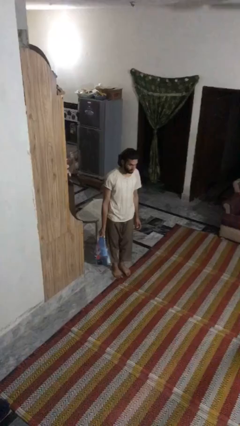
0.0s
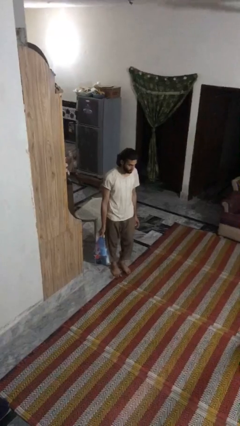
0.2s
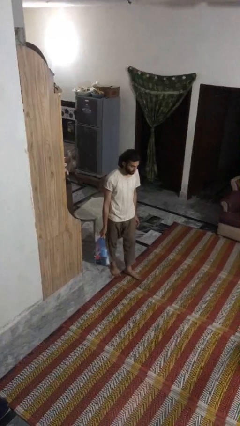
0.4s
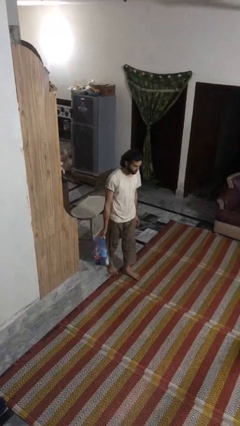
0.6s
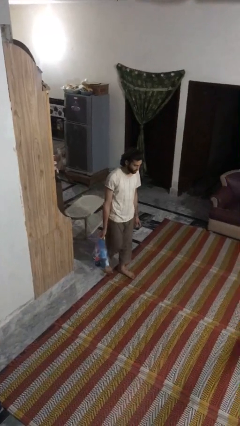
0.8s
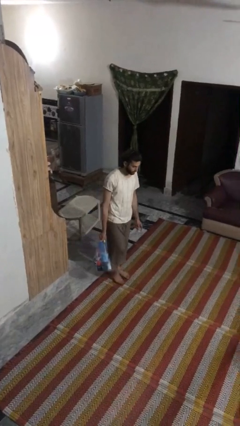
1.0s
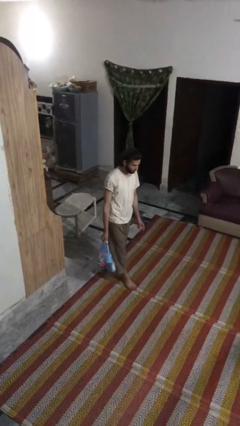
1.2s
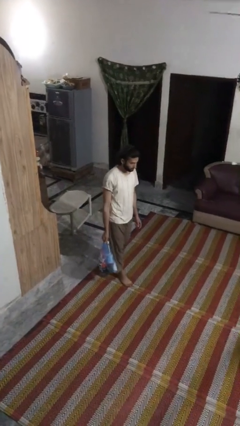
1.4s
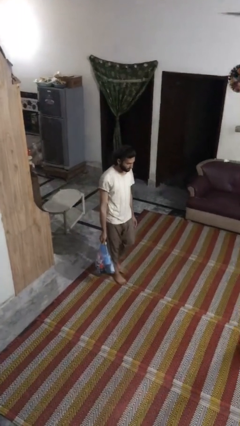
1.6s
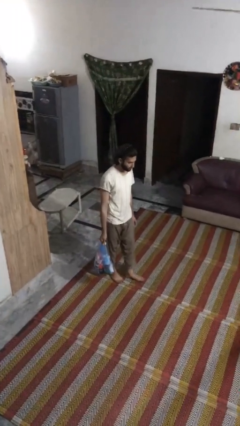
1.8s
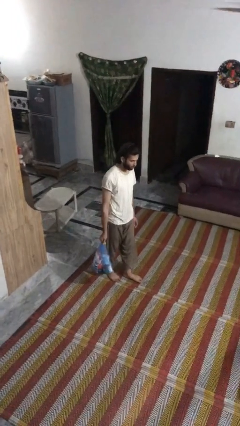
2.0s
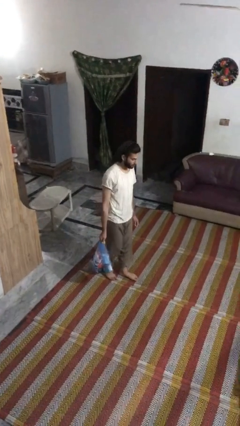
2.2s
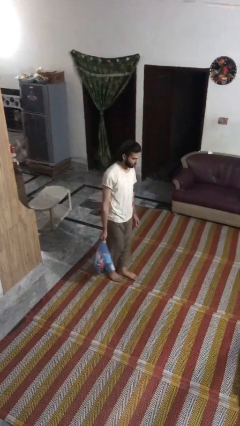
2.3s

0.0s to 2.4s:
person carries groceries

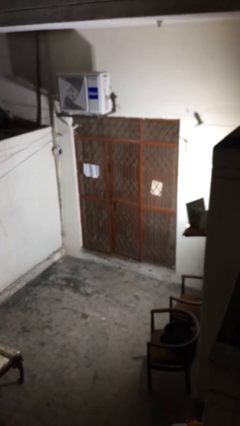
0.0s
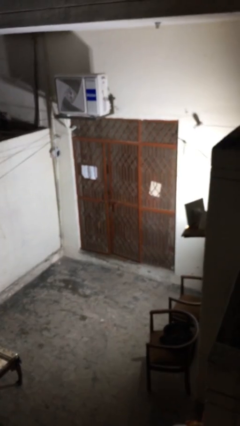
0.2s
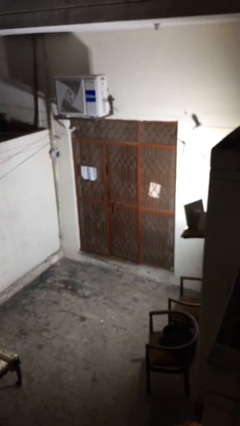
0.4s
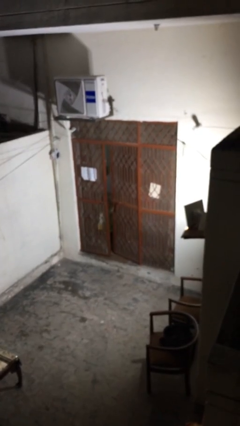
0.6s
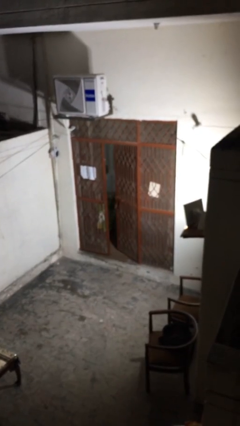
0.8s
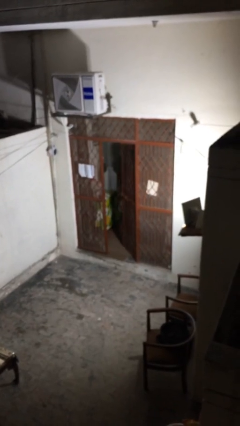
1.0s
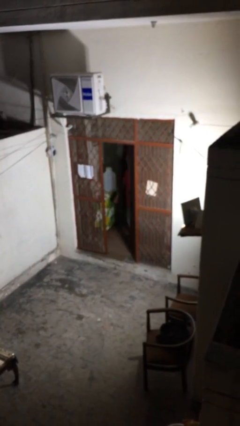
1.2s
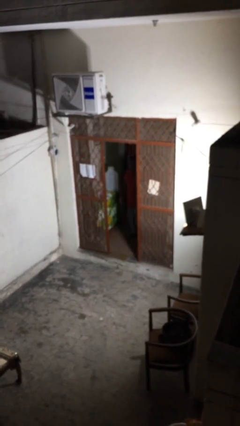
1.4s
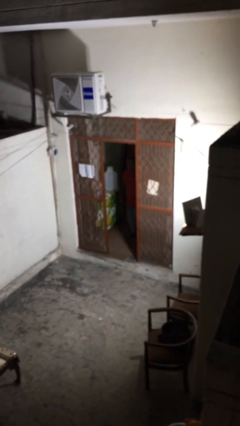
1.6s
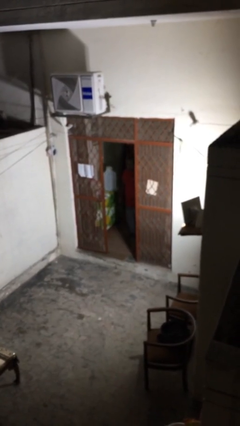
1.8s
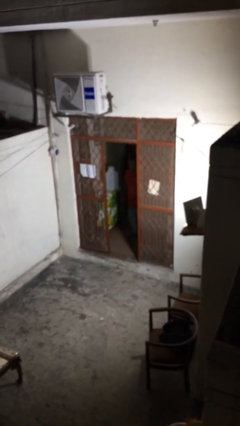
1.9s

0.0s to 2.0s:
person opens facility door

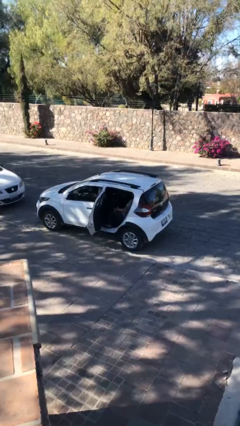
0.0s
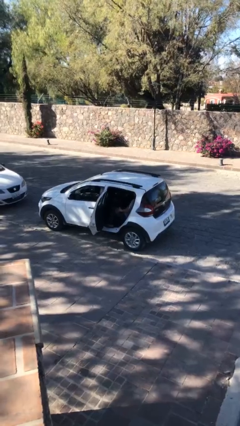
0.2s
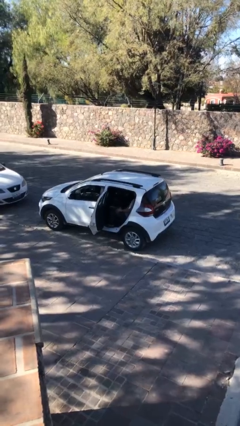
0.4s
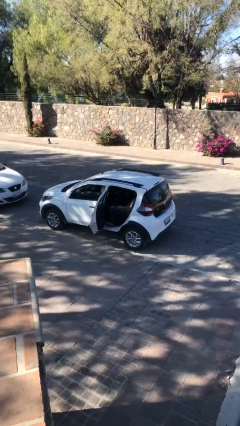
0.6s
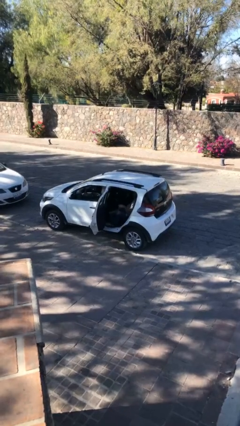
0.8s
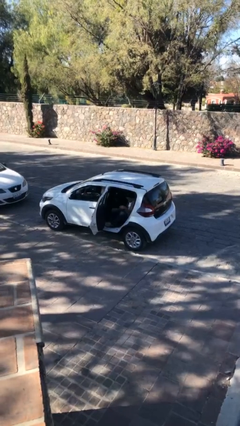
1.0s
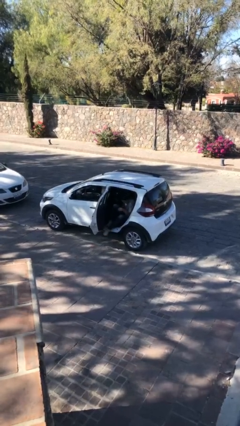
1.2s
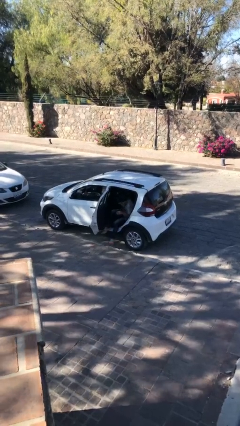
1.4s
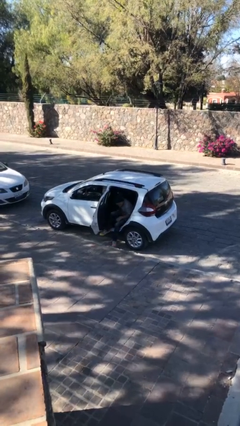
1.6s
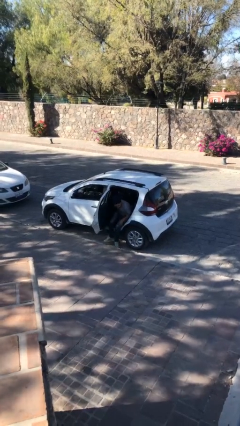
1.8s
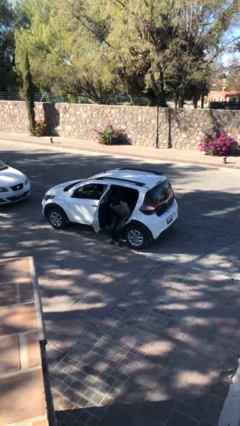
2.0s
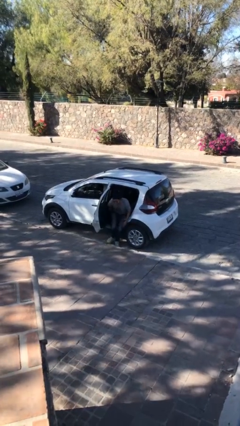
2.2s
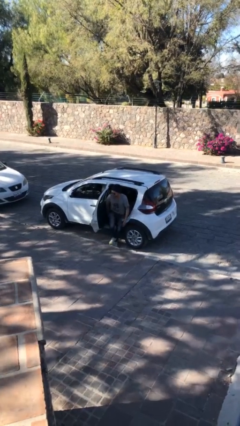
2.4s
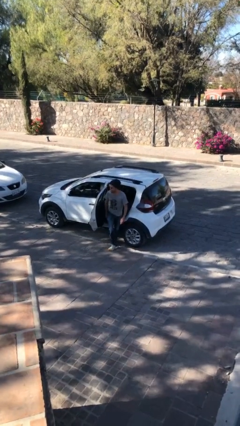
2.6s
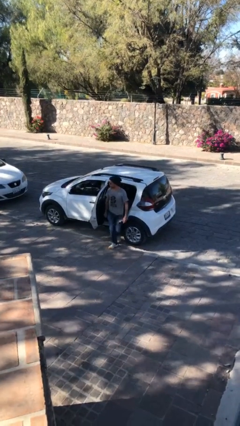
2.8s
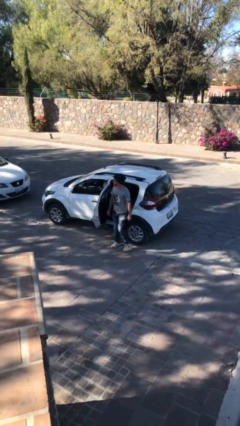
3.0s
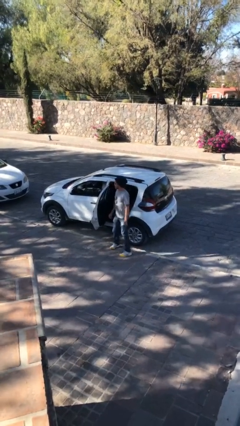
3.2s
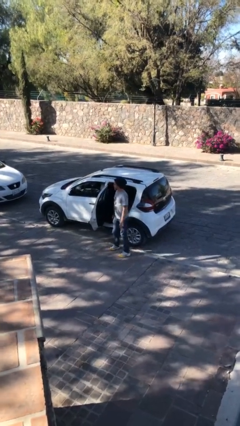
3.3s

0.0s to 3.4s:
person exits car

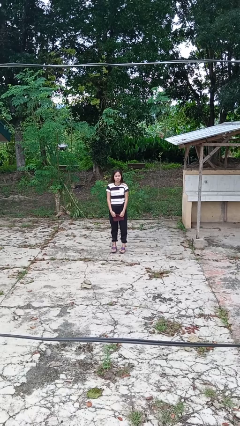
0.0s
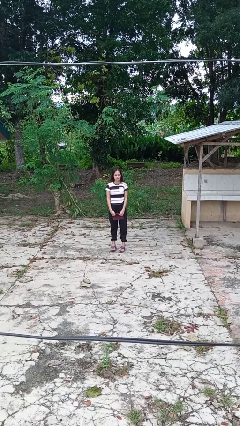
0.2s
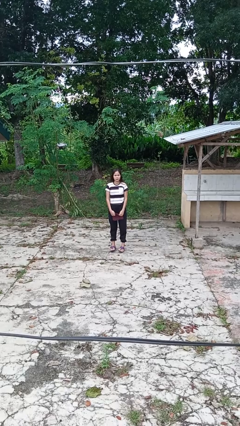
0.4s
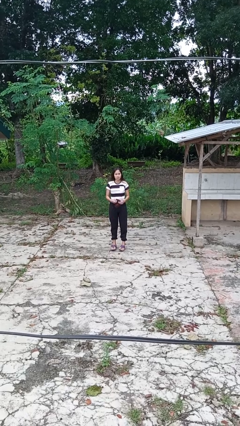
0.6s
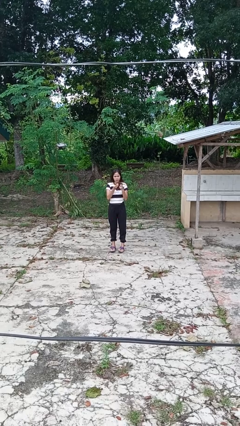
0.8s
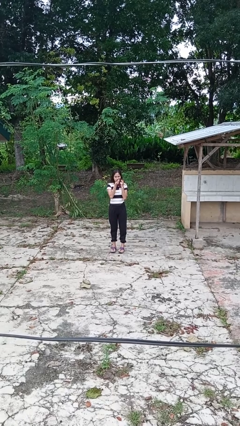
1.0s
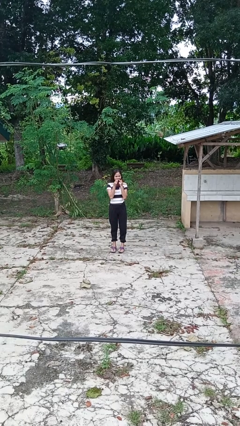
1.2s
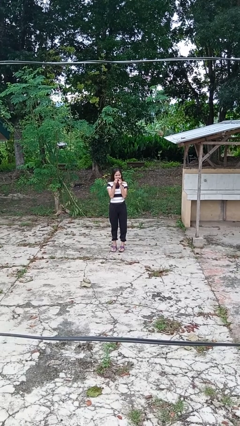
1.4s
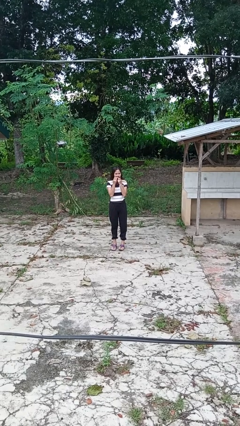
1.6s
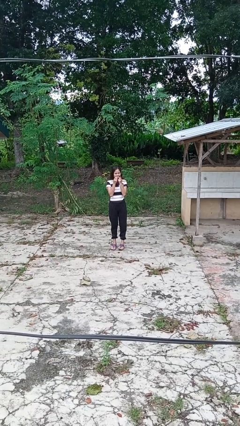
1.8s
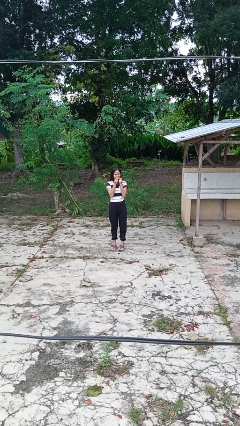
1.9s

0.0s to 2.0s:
person wipes mouth with napkin

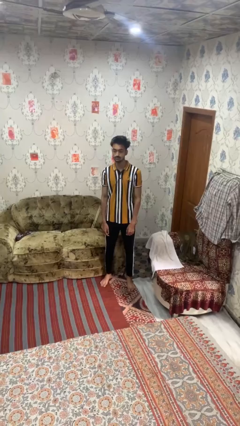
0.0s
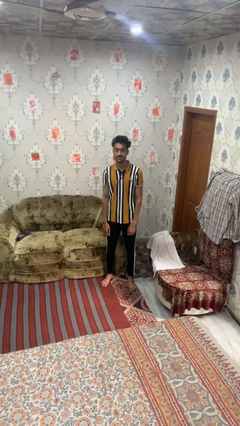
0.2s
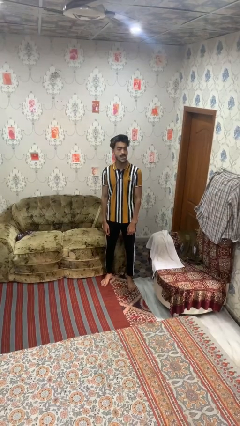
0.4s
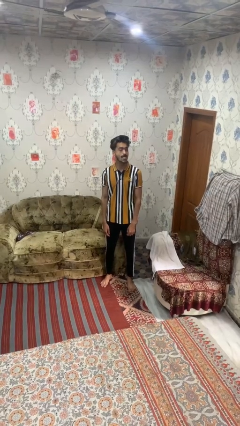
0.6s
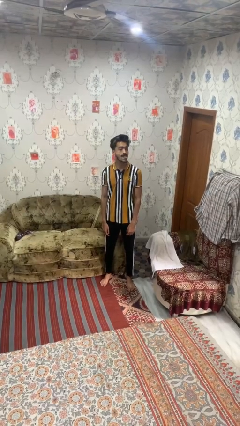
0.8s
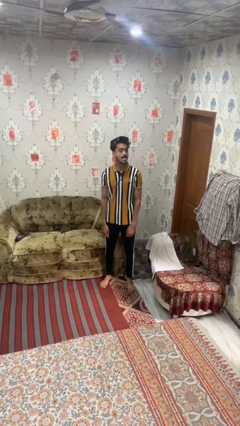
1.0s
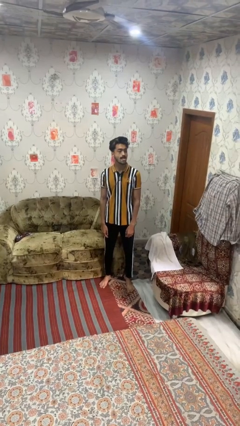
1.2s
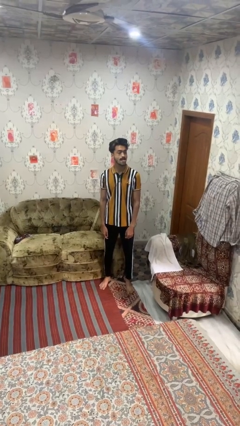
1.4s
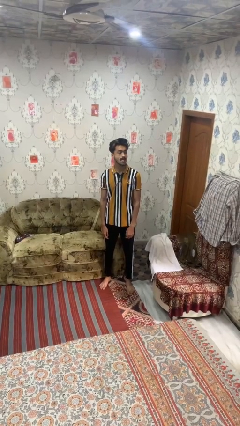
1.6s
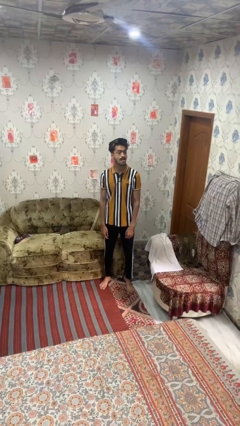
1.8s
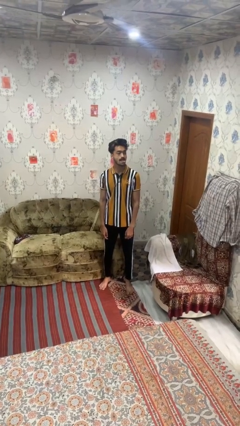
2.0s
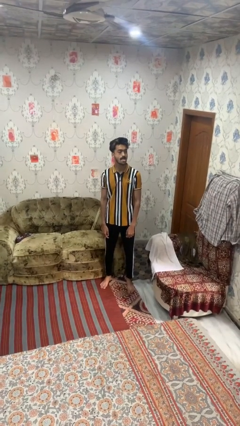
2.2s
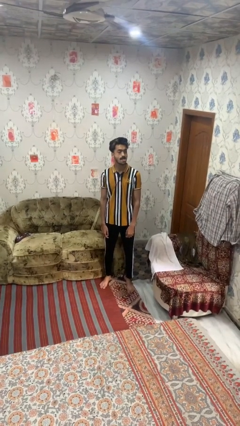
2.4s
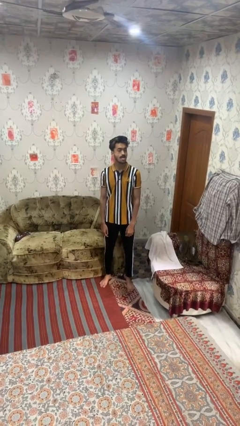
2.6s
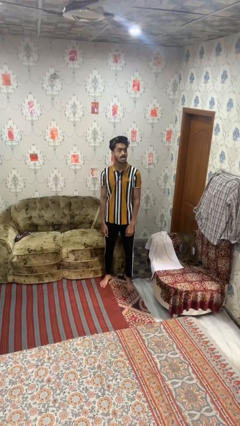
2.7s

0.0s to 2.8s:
person sticks out tongue

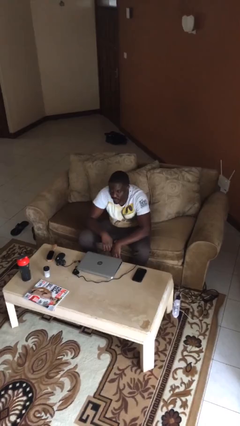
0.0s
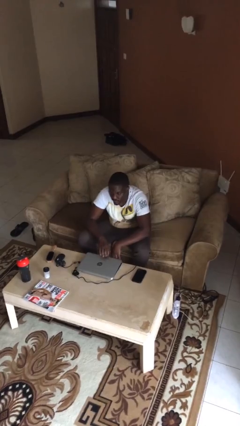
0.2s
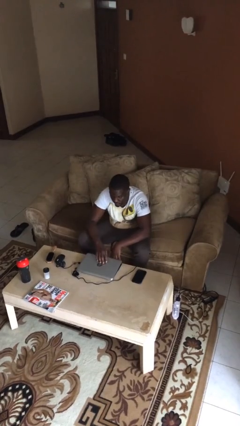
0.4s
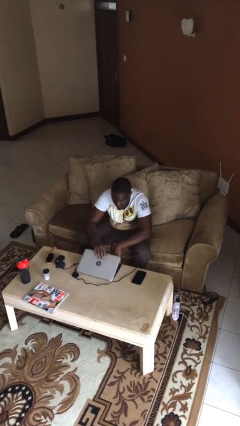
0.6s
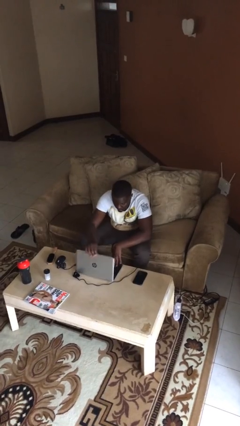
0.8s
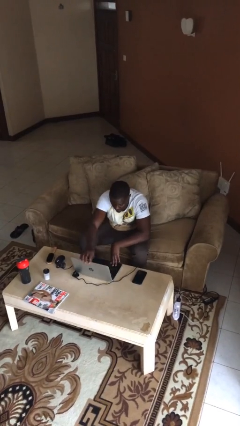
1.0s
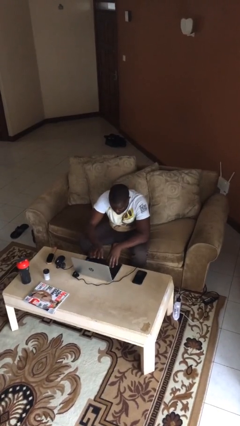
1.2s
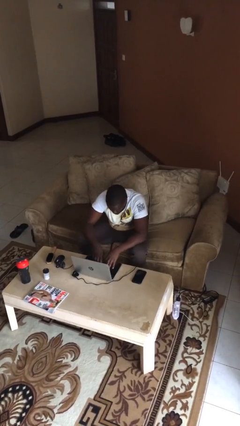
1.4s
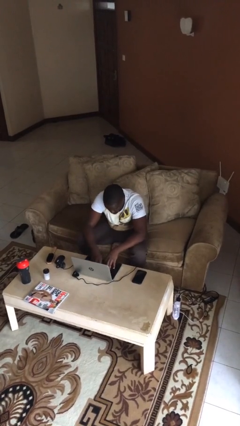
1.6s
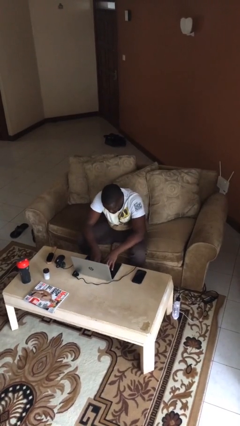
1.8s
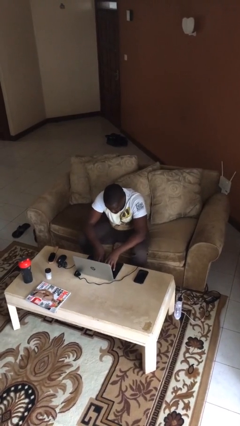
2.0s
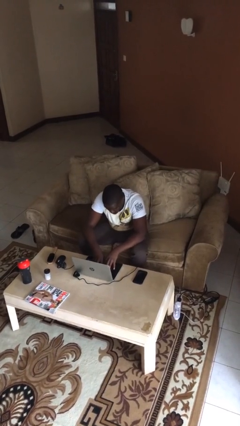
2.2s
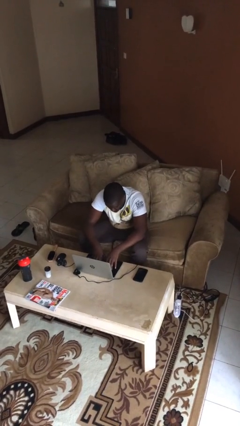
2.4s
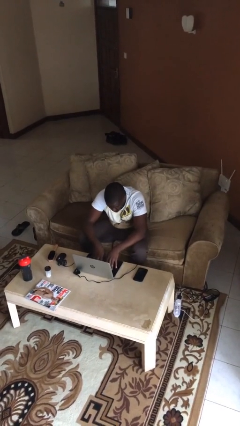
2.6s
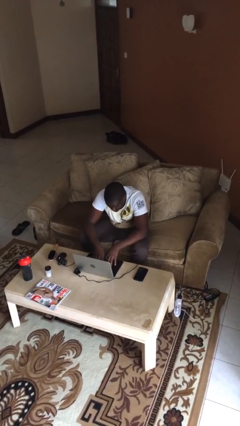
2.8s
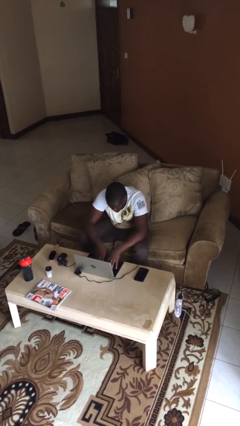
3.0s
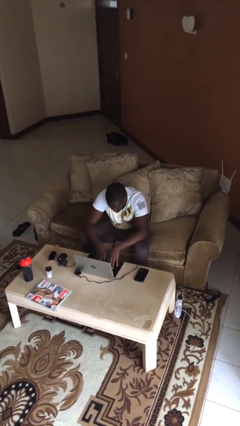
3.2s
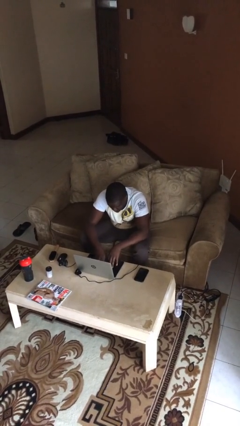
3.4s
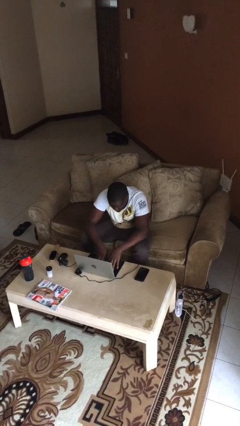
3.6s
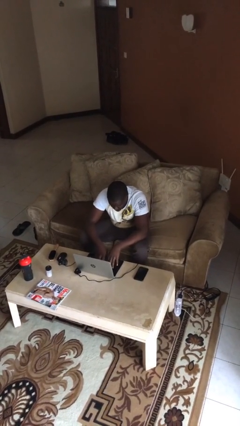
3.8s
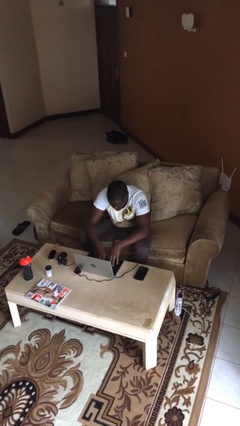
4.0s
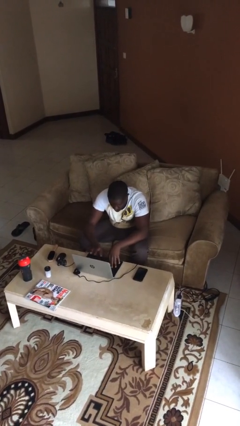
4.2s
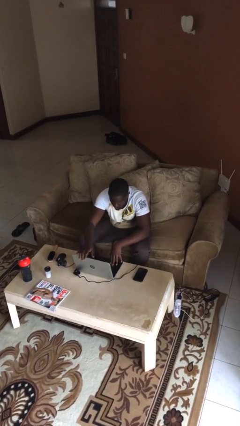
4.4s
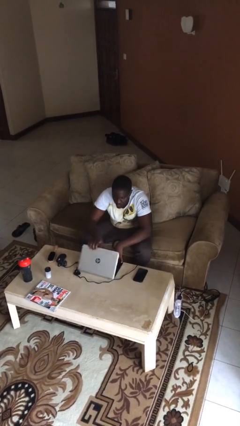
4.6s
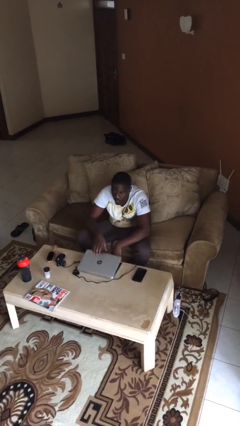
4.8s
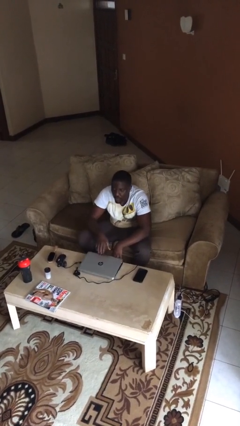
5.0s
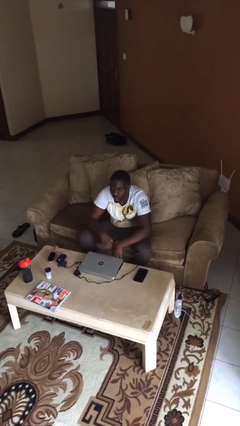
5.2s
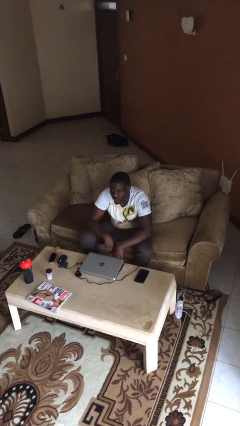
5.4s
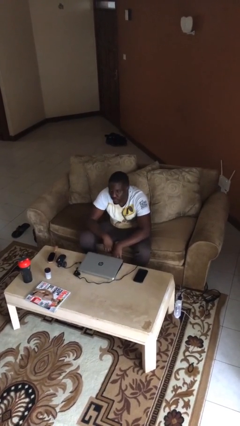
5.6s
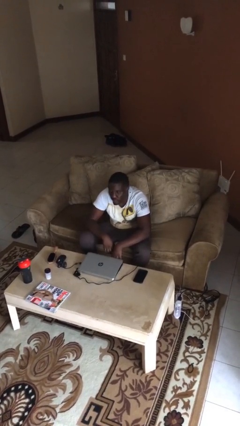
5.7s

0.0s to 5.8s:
person interacts with laptop
